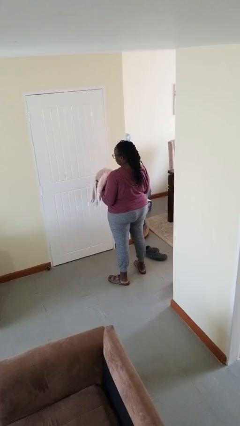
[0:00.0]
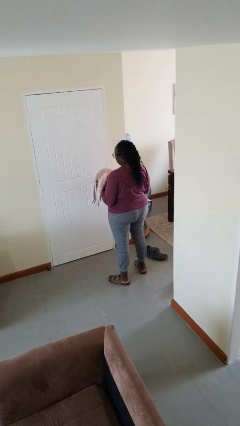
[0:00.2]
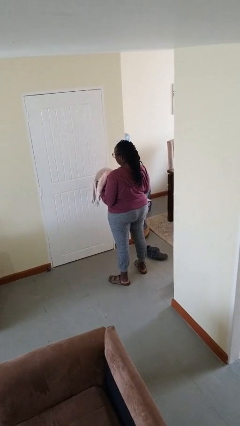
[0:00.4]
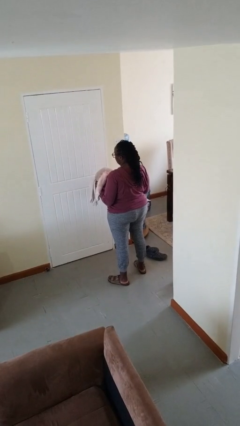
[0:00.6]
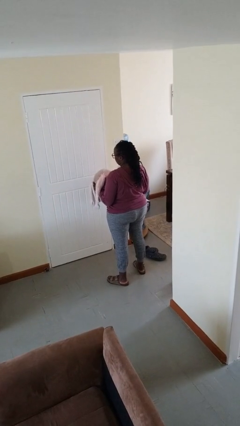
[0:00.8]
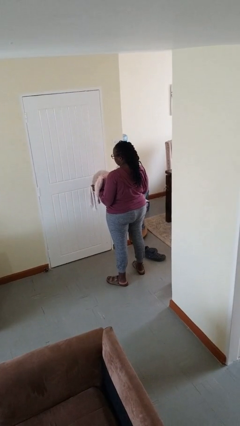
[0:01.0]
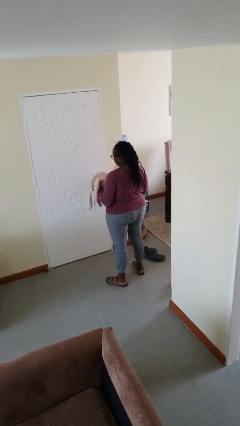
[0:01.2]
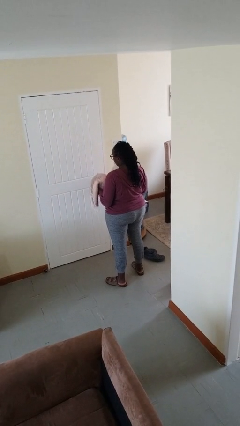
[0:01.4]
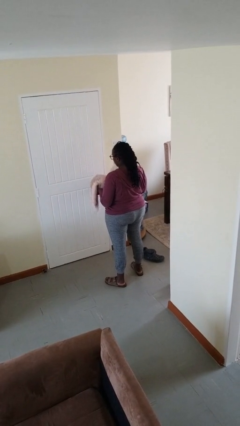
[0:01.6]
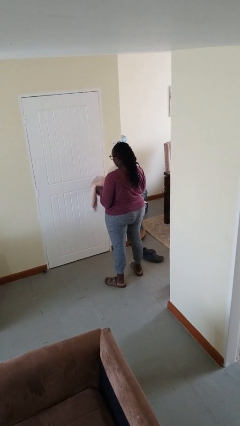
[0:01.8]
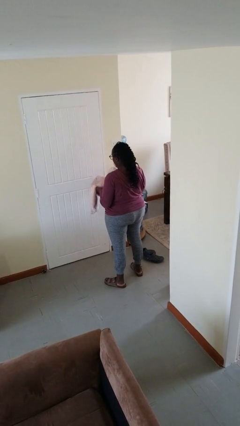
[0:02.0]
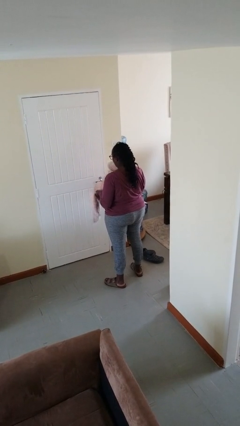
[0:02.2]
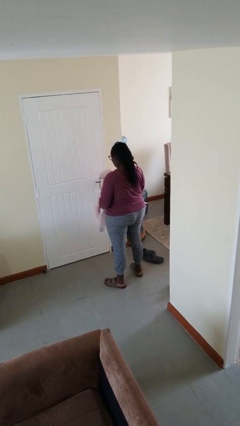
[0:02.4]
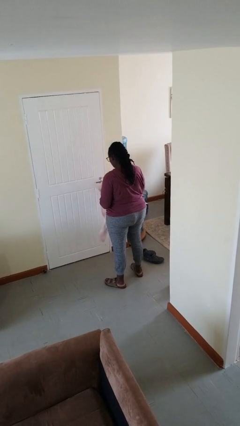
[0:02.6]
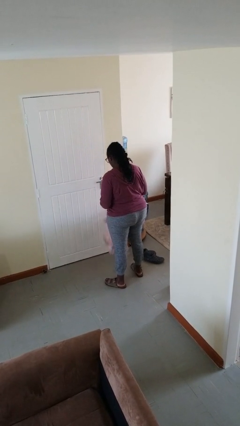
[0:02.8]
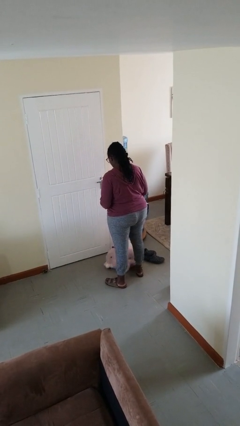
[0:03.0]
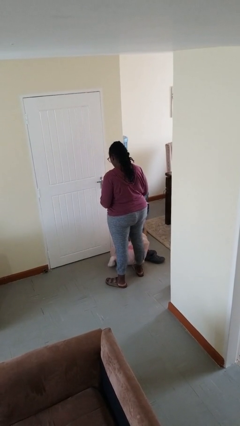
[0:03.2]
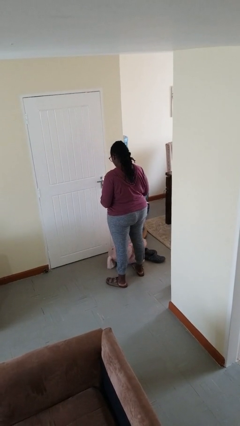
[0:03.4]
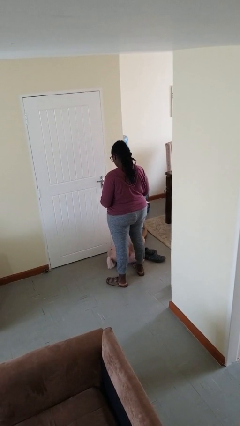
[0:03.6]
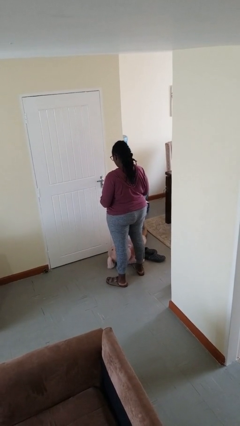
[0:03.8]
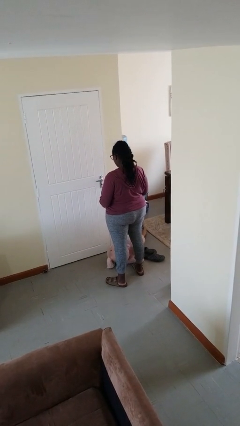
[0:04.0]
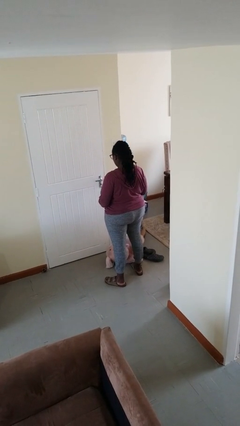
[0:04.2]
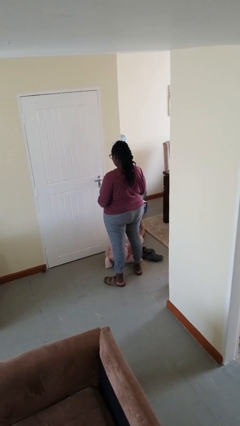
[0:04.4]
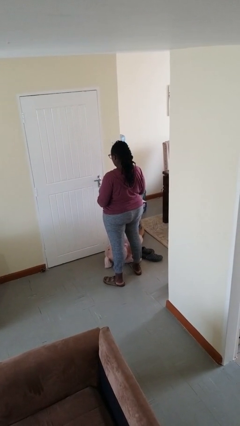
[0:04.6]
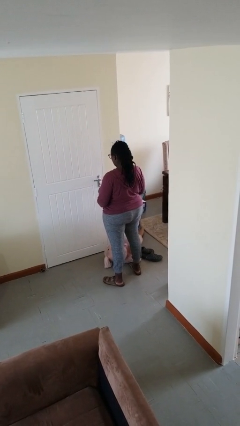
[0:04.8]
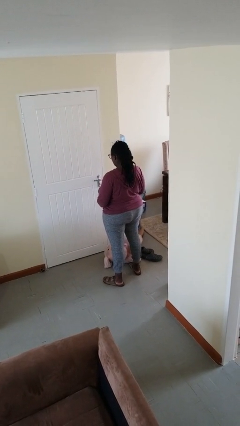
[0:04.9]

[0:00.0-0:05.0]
person drops object

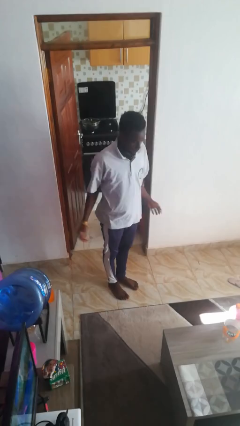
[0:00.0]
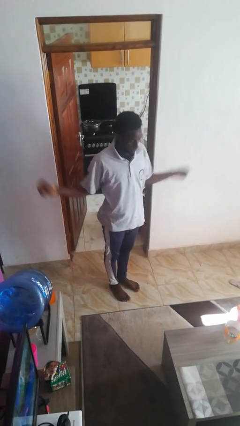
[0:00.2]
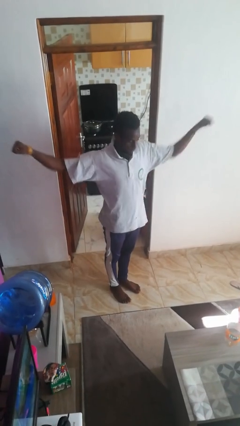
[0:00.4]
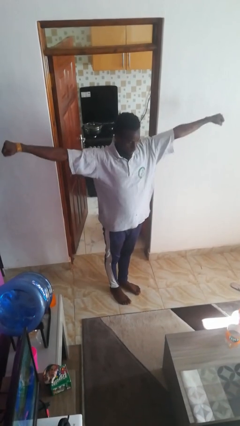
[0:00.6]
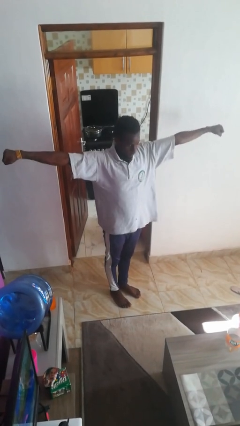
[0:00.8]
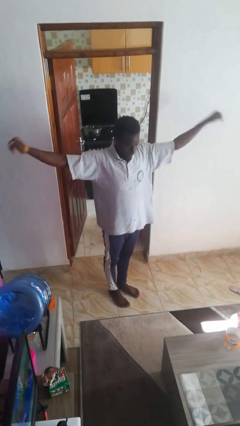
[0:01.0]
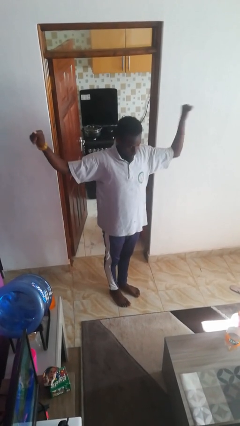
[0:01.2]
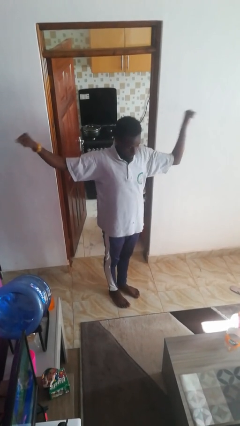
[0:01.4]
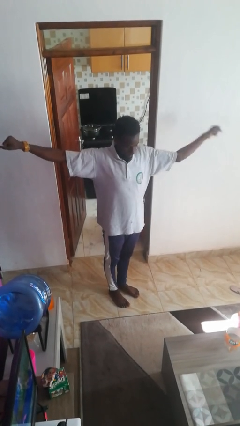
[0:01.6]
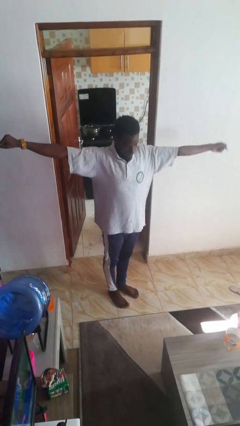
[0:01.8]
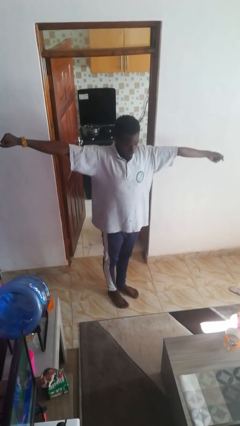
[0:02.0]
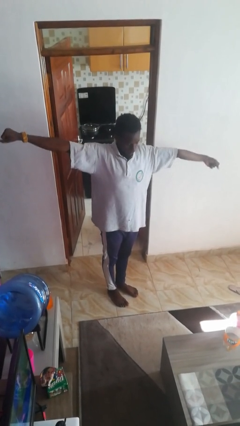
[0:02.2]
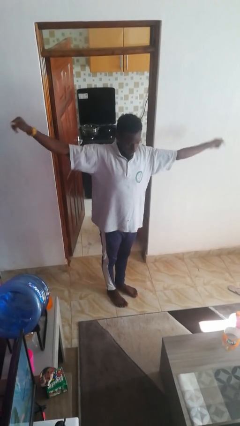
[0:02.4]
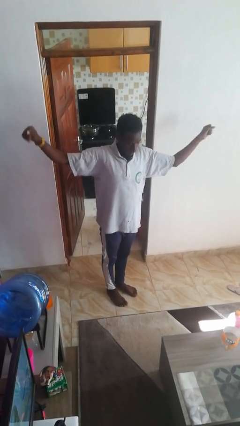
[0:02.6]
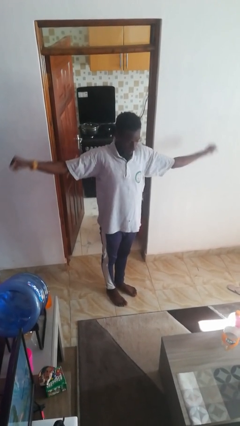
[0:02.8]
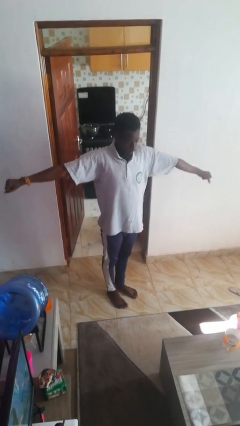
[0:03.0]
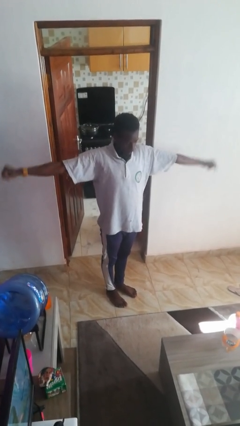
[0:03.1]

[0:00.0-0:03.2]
person stretches arms to side

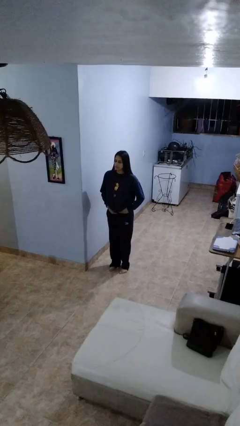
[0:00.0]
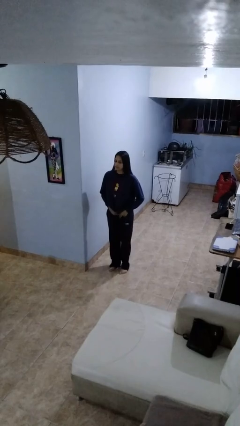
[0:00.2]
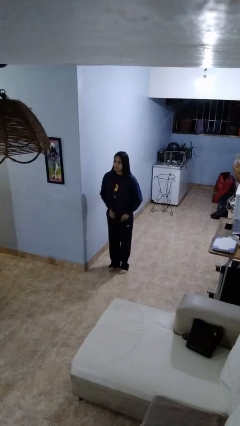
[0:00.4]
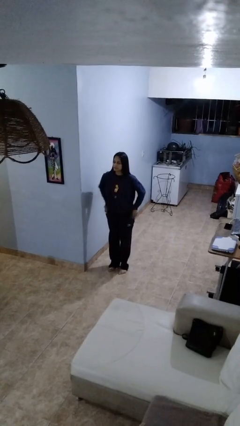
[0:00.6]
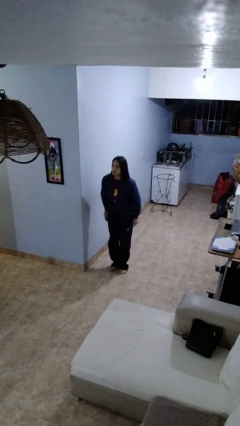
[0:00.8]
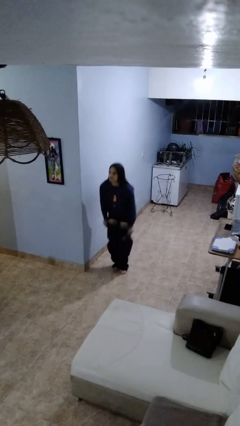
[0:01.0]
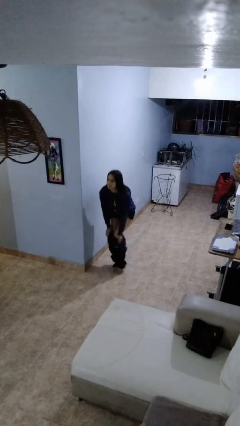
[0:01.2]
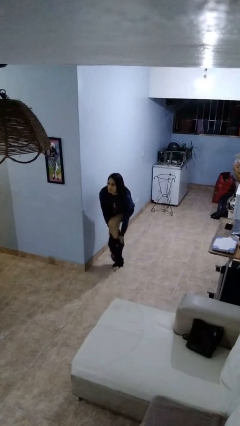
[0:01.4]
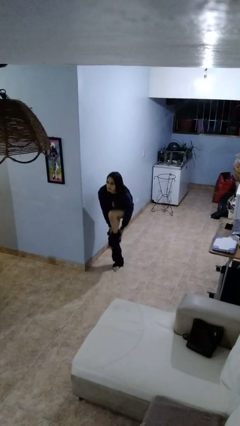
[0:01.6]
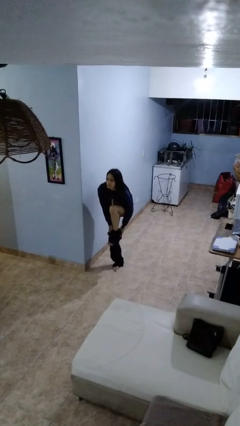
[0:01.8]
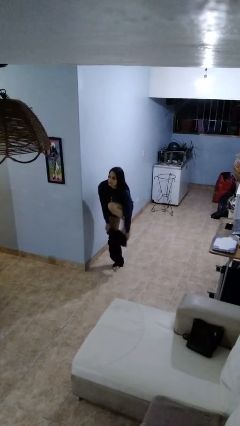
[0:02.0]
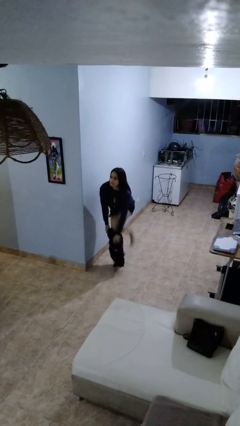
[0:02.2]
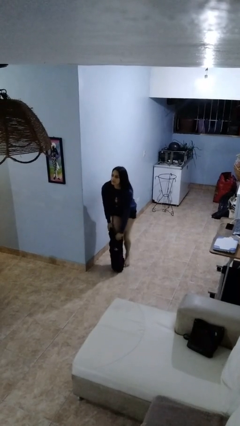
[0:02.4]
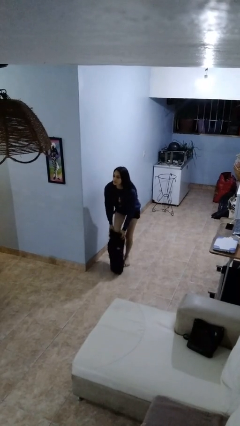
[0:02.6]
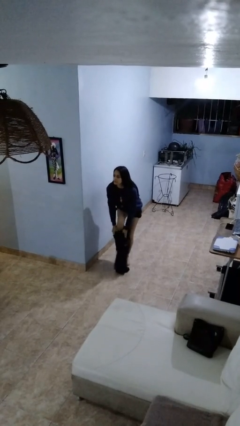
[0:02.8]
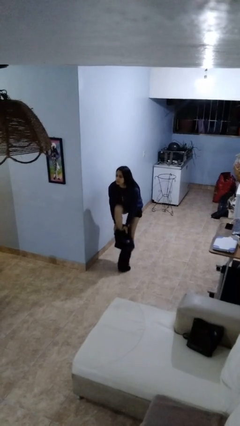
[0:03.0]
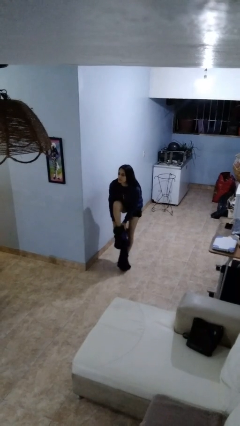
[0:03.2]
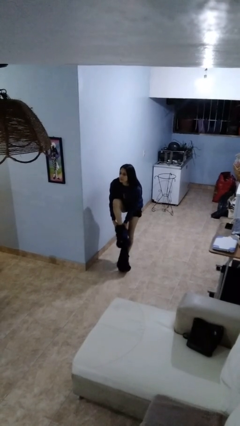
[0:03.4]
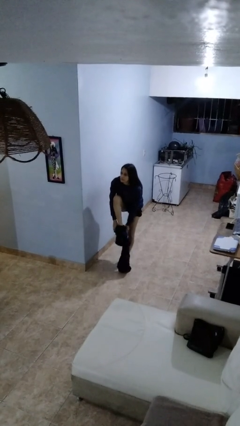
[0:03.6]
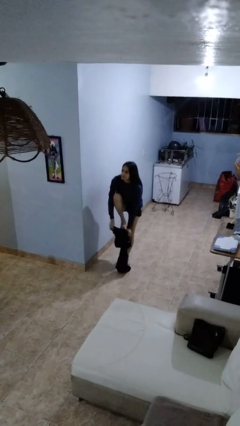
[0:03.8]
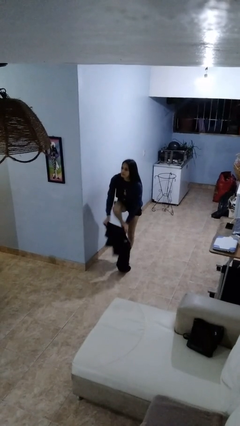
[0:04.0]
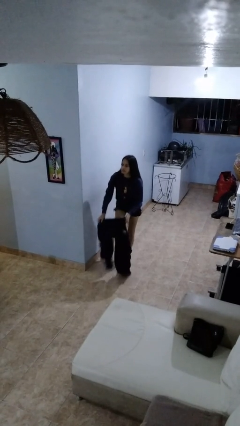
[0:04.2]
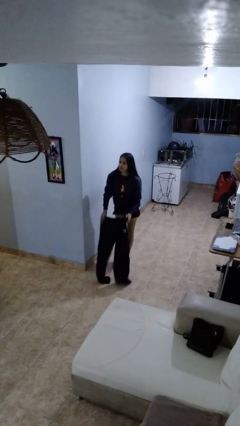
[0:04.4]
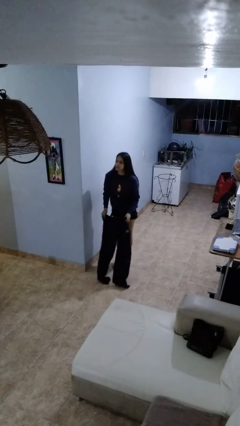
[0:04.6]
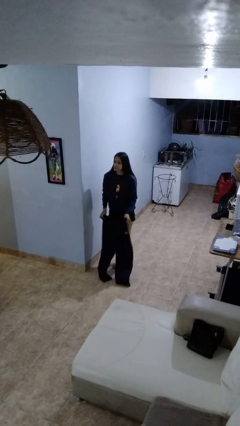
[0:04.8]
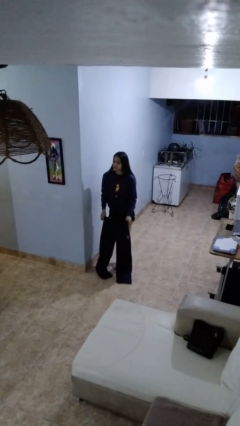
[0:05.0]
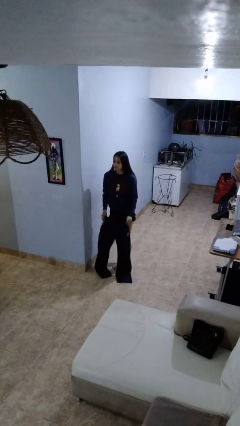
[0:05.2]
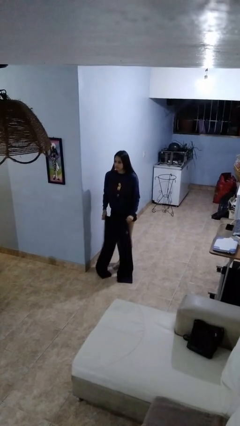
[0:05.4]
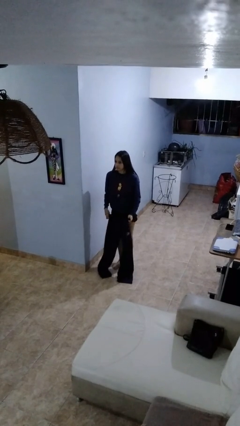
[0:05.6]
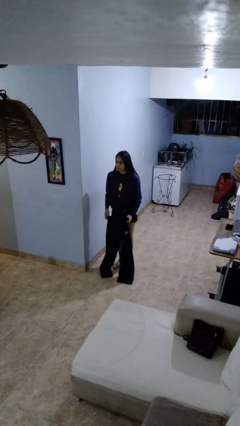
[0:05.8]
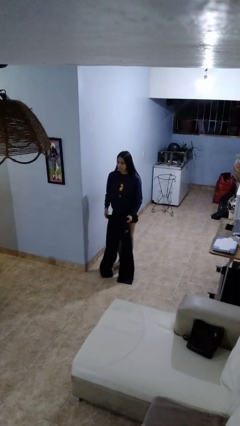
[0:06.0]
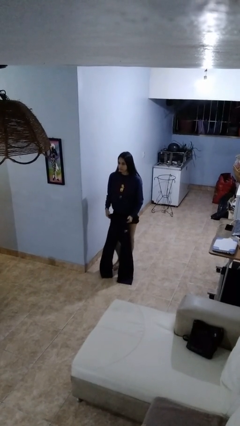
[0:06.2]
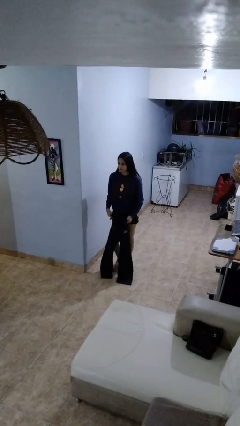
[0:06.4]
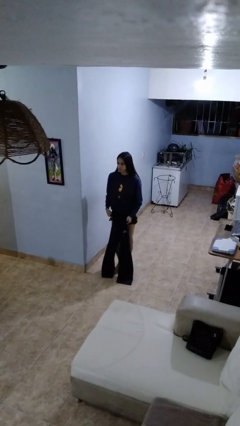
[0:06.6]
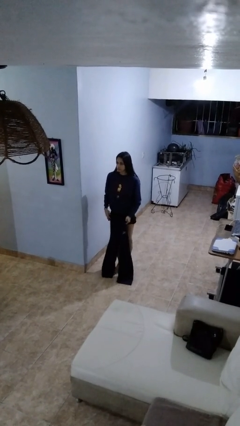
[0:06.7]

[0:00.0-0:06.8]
person takes off pants

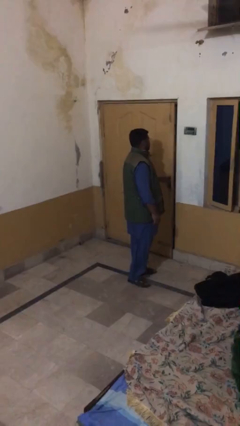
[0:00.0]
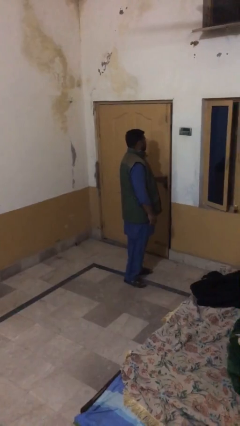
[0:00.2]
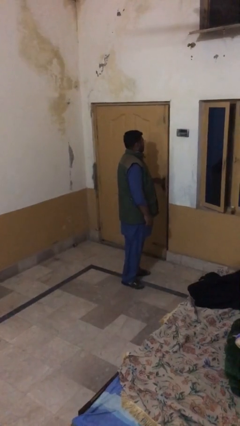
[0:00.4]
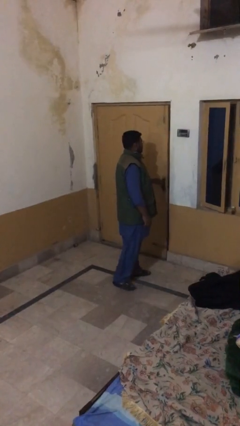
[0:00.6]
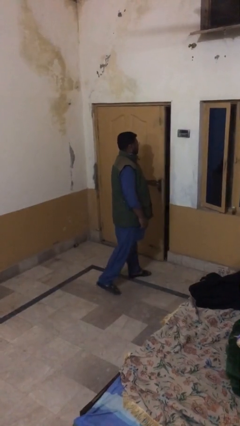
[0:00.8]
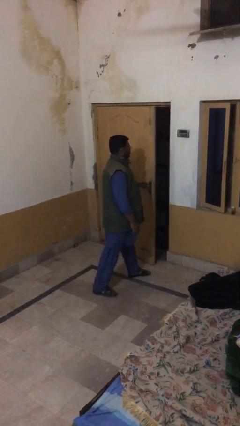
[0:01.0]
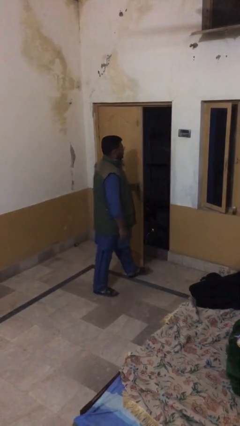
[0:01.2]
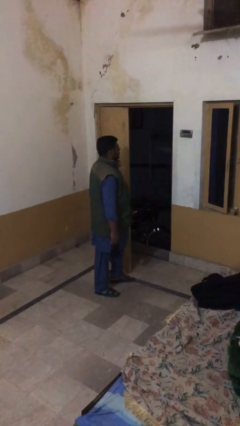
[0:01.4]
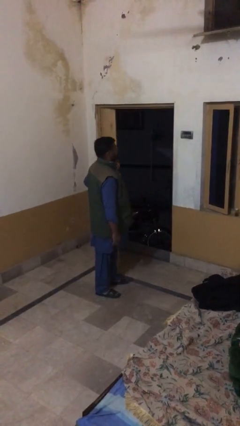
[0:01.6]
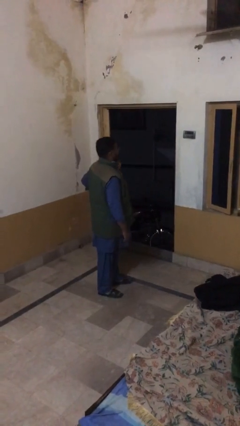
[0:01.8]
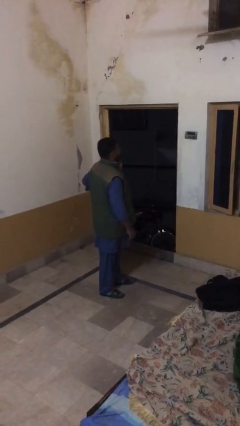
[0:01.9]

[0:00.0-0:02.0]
person opens facility door

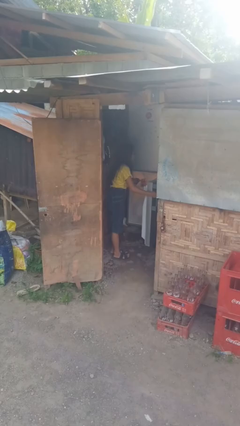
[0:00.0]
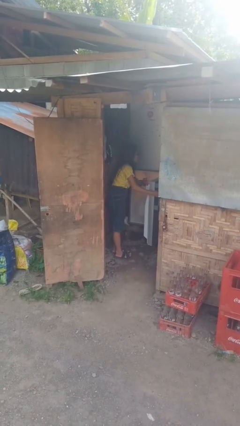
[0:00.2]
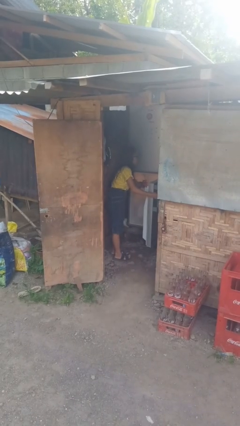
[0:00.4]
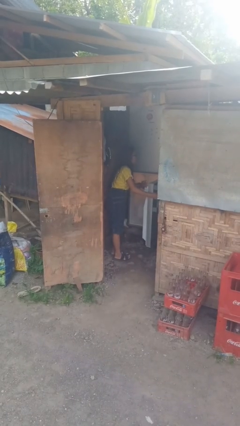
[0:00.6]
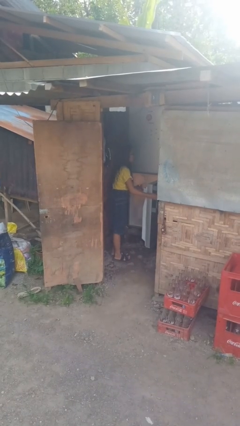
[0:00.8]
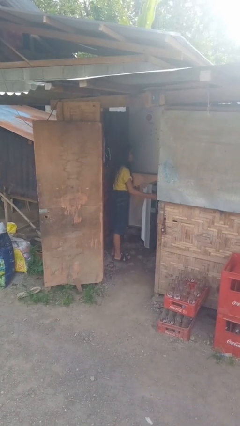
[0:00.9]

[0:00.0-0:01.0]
person takes object from refrigerator
